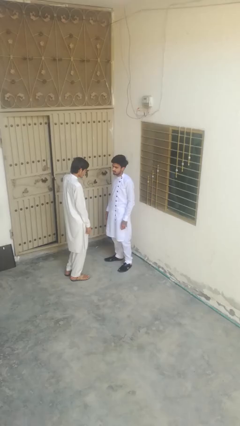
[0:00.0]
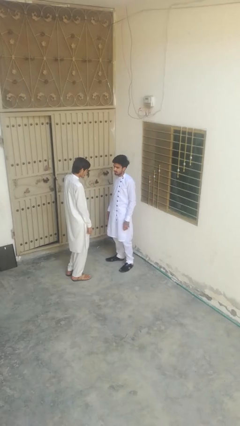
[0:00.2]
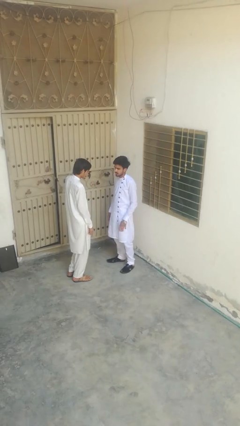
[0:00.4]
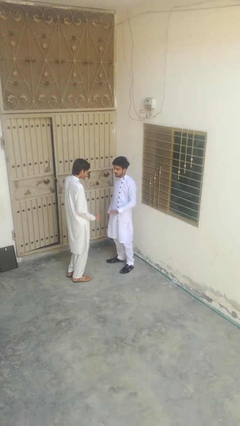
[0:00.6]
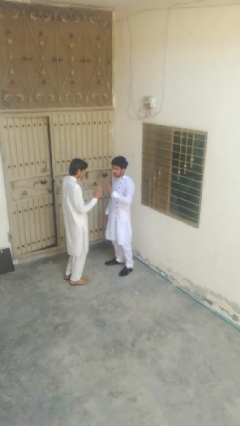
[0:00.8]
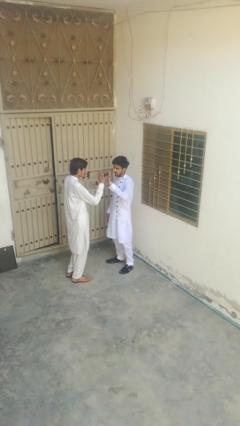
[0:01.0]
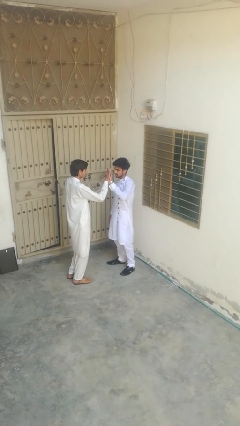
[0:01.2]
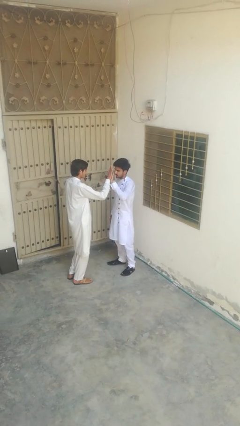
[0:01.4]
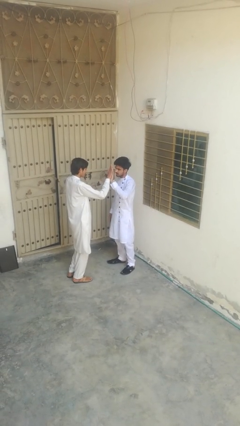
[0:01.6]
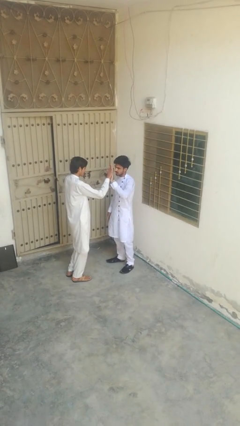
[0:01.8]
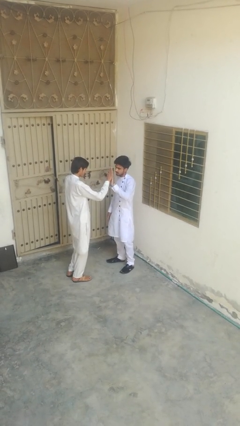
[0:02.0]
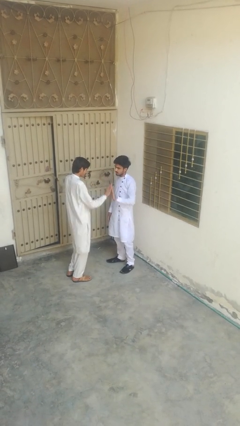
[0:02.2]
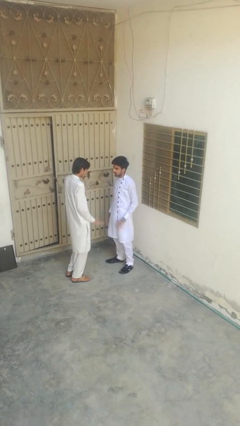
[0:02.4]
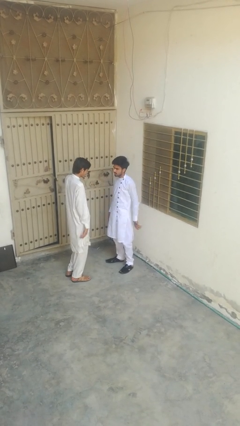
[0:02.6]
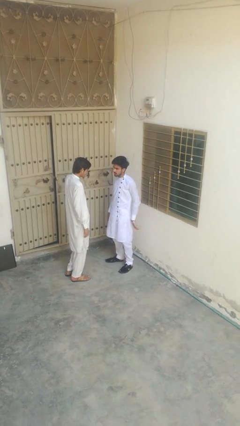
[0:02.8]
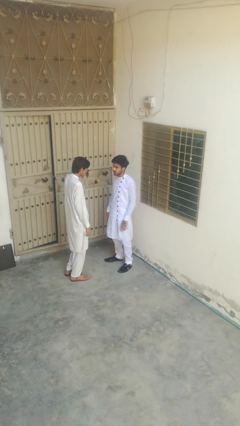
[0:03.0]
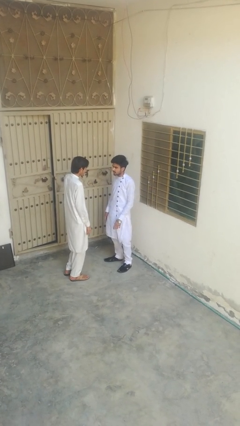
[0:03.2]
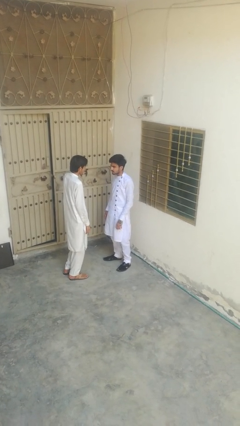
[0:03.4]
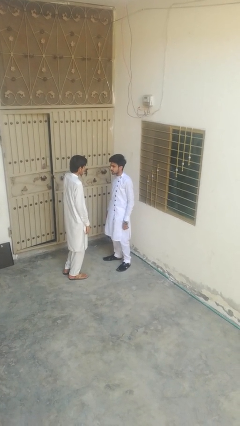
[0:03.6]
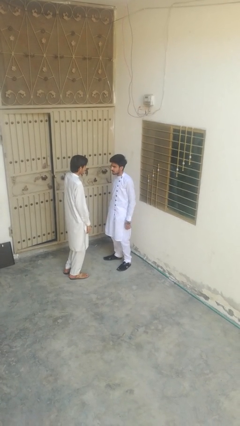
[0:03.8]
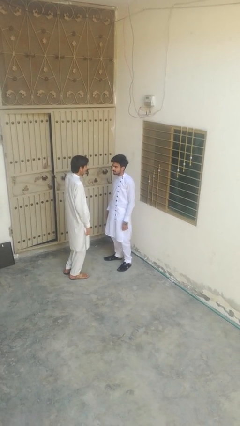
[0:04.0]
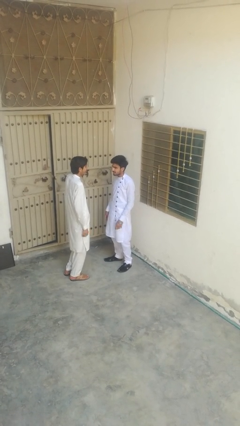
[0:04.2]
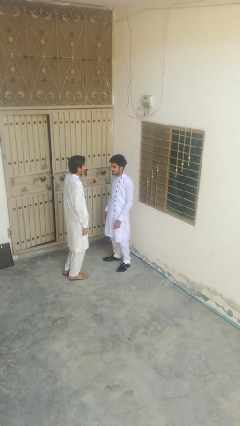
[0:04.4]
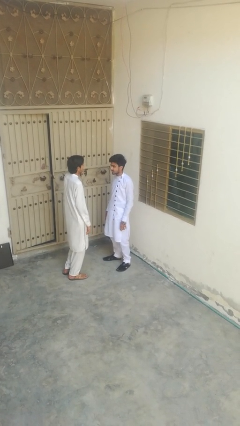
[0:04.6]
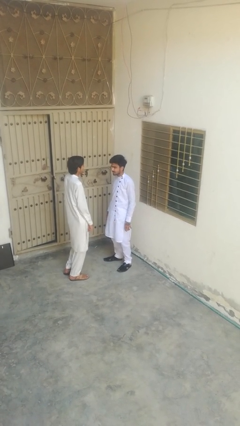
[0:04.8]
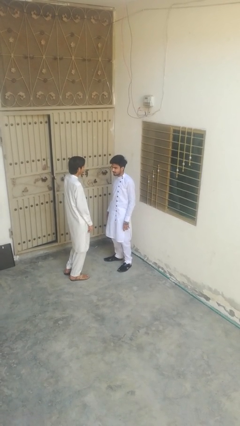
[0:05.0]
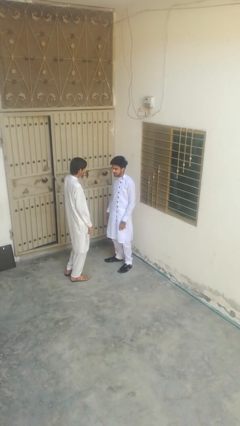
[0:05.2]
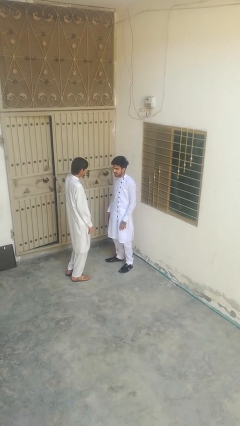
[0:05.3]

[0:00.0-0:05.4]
person highfives hand

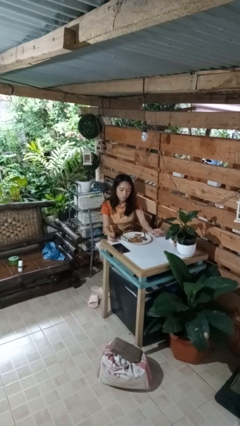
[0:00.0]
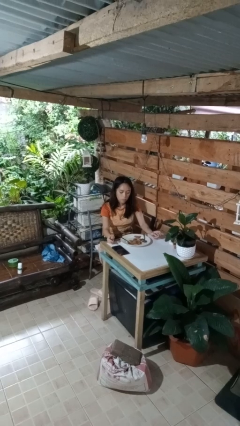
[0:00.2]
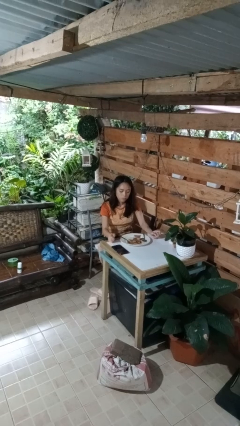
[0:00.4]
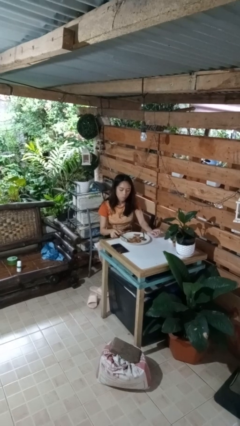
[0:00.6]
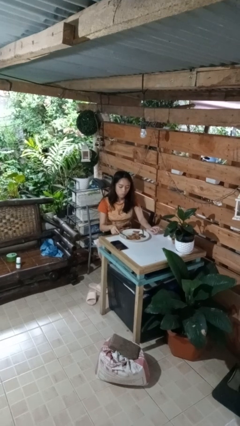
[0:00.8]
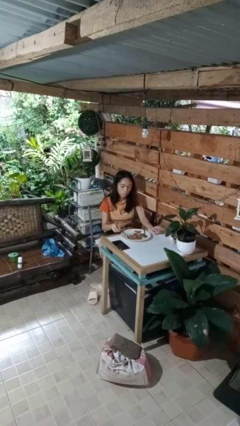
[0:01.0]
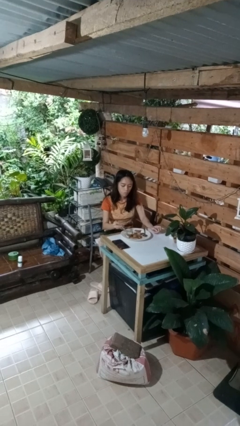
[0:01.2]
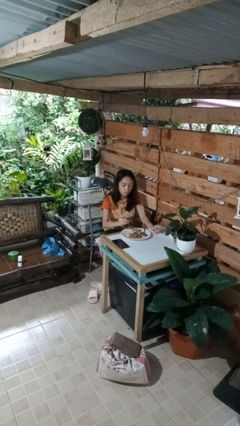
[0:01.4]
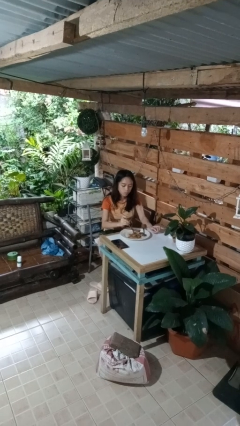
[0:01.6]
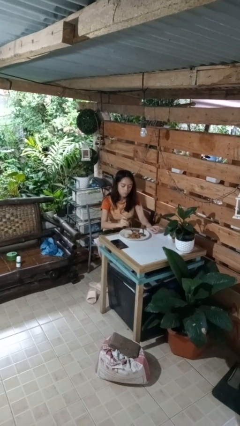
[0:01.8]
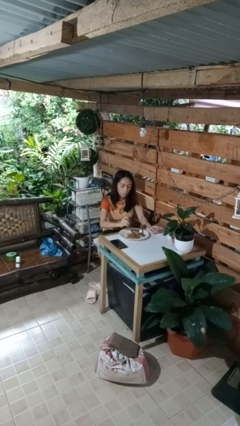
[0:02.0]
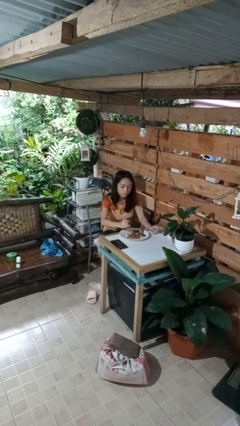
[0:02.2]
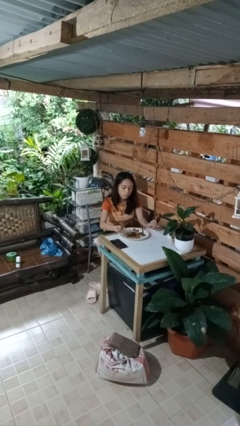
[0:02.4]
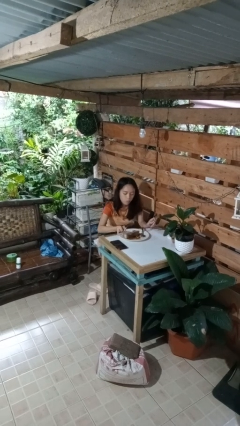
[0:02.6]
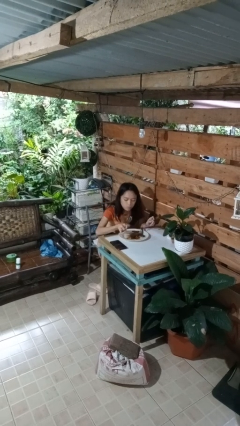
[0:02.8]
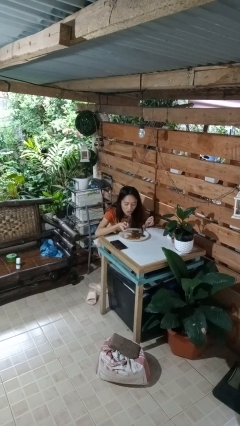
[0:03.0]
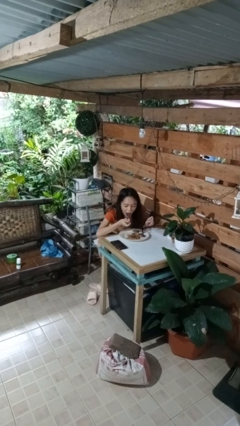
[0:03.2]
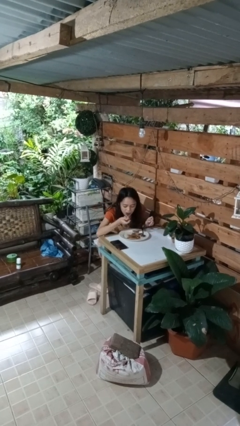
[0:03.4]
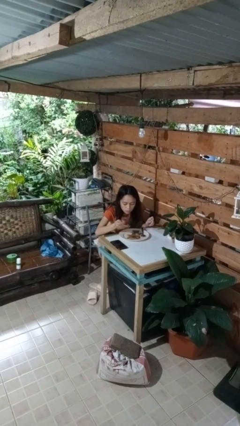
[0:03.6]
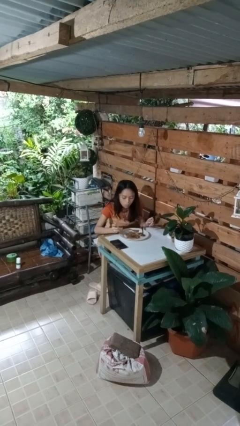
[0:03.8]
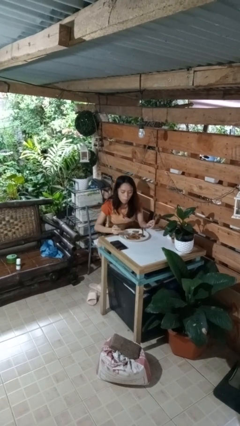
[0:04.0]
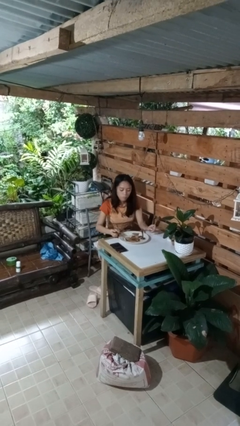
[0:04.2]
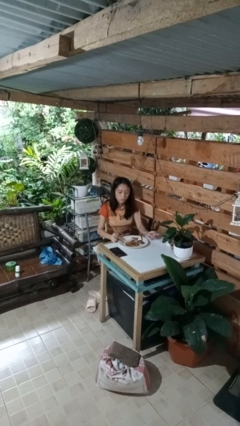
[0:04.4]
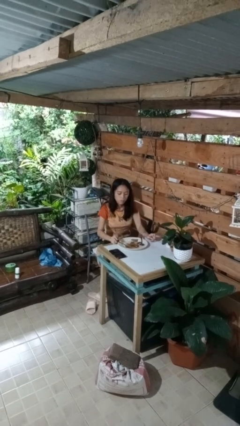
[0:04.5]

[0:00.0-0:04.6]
person eats with utensil

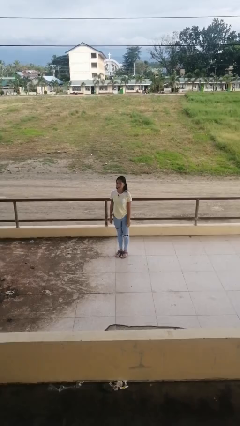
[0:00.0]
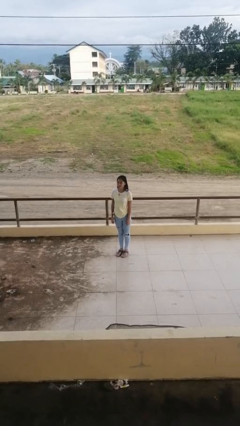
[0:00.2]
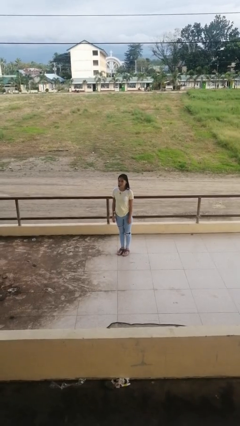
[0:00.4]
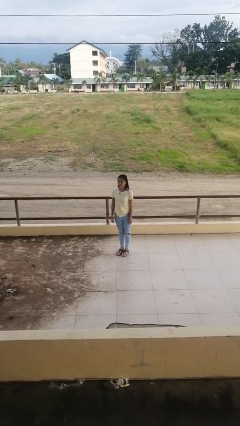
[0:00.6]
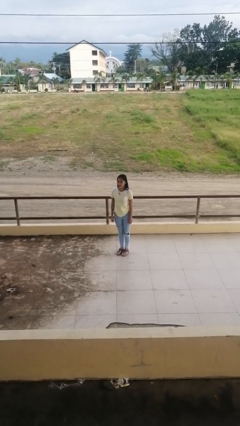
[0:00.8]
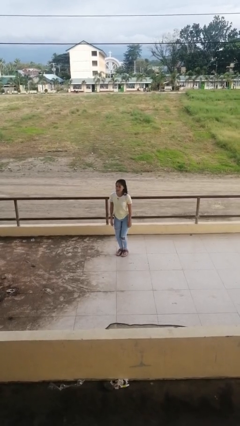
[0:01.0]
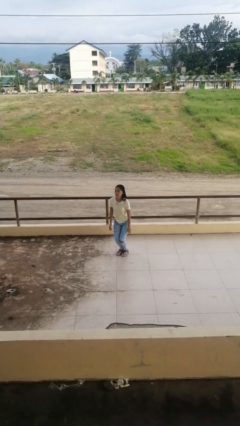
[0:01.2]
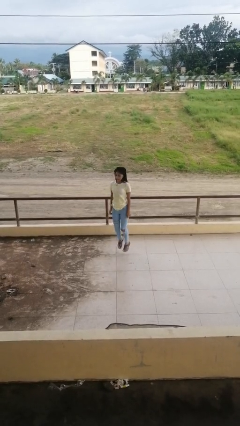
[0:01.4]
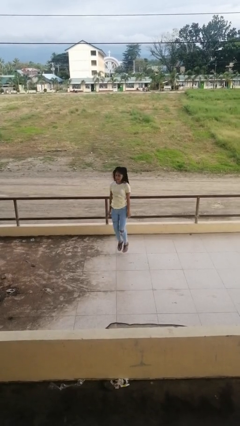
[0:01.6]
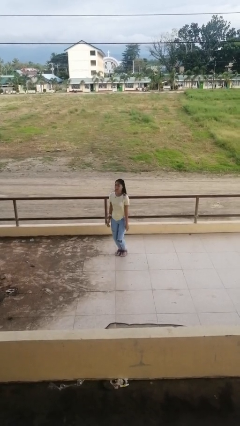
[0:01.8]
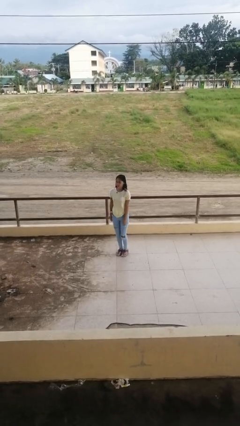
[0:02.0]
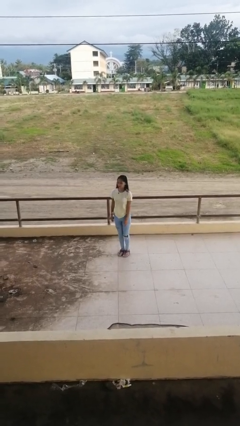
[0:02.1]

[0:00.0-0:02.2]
person jumps

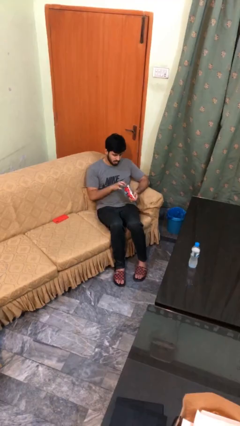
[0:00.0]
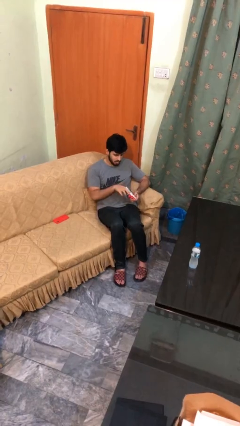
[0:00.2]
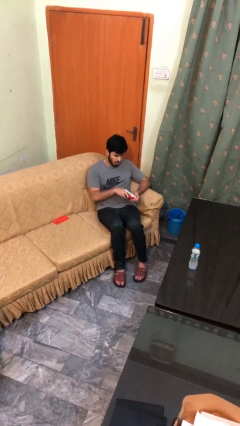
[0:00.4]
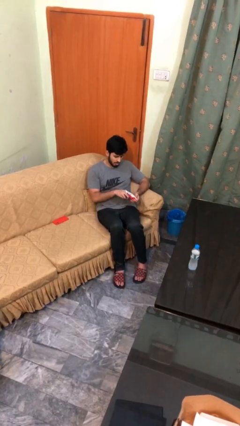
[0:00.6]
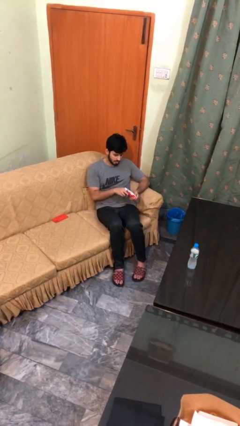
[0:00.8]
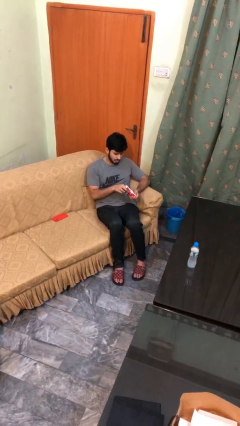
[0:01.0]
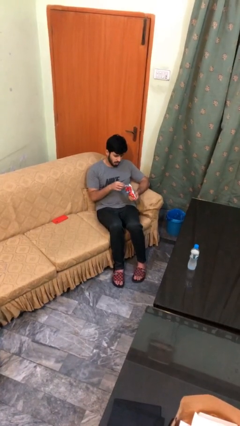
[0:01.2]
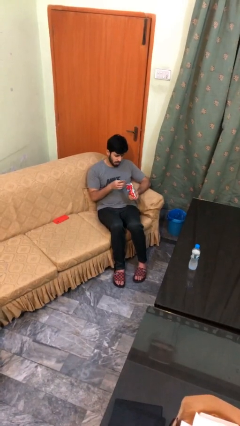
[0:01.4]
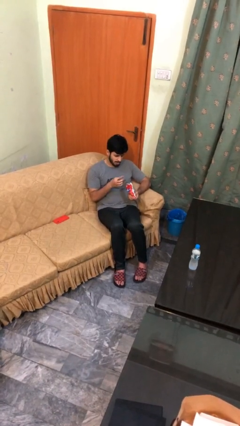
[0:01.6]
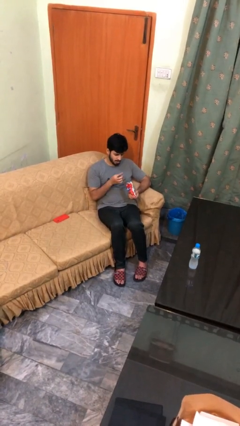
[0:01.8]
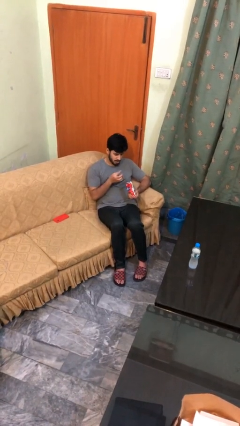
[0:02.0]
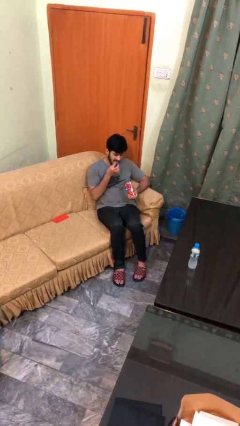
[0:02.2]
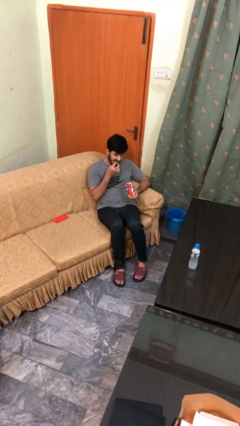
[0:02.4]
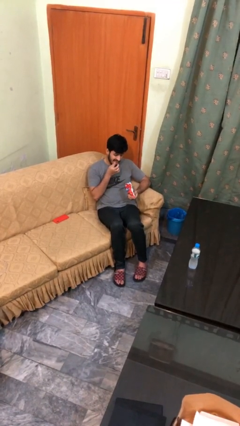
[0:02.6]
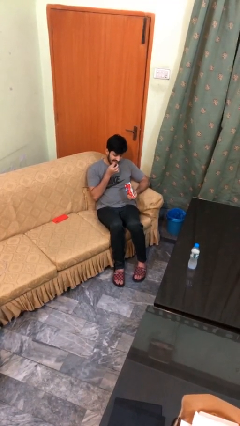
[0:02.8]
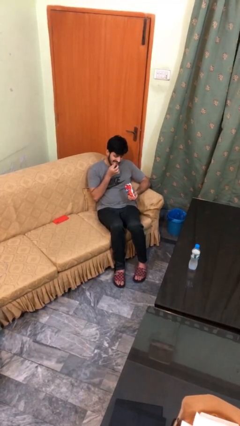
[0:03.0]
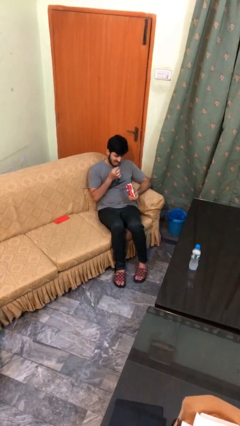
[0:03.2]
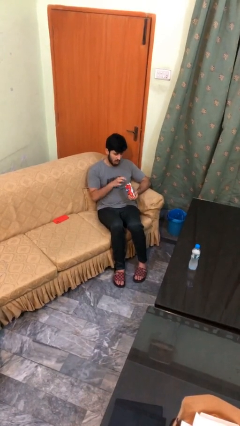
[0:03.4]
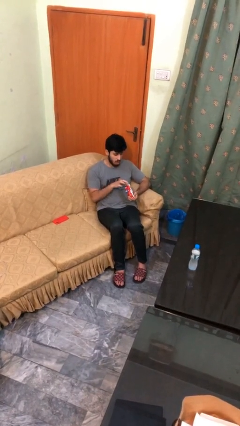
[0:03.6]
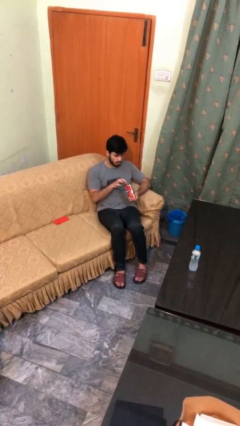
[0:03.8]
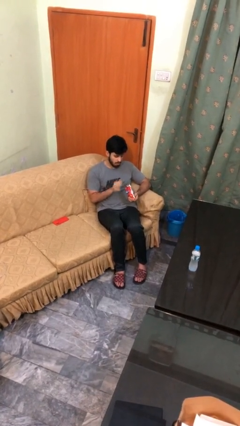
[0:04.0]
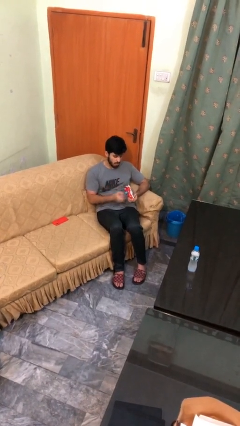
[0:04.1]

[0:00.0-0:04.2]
person eats snack from bag

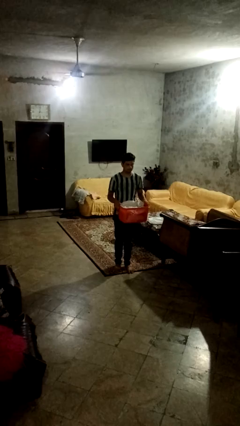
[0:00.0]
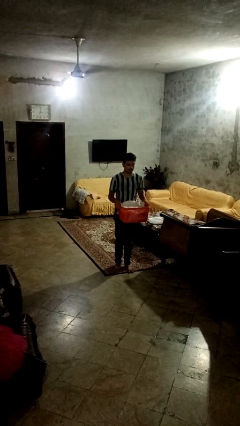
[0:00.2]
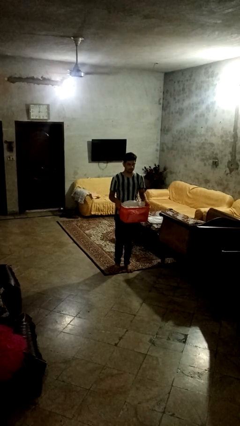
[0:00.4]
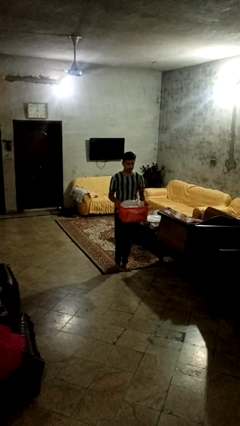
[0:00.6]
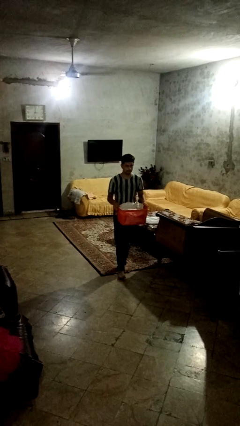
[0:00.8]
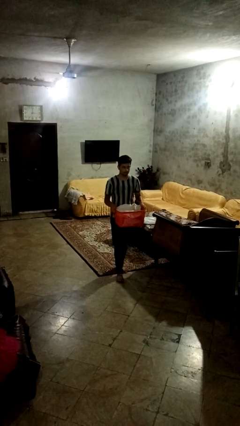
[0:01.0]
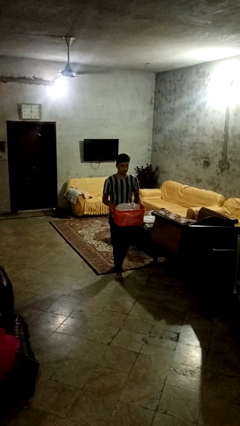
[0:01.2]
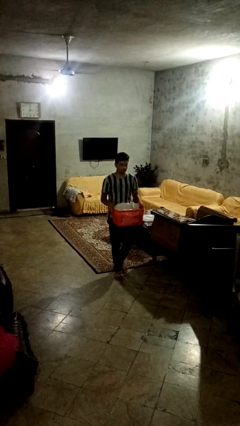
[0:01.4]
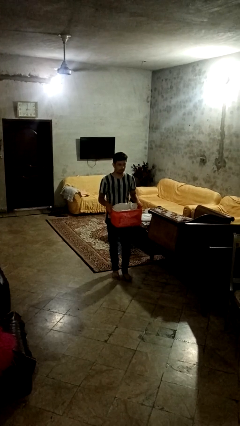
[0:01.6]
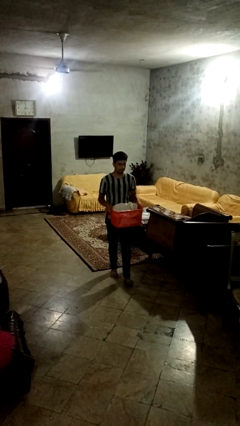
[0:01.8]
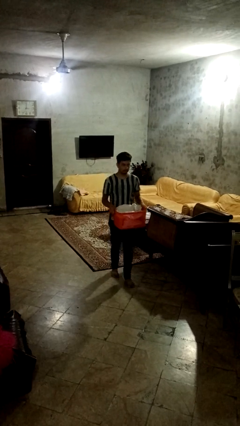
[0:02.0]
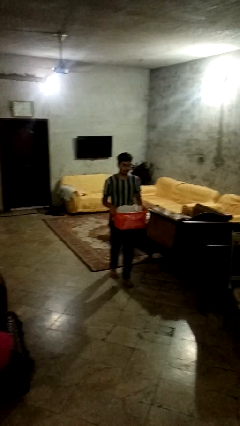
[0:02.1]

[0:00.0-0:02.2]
person carries laundry basket
